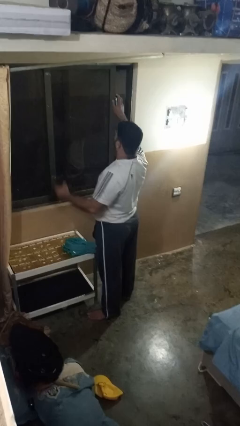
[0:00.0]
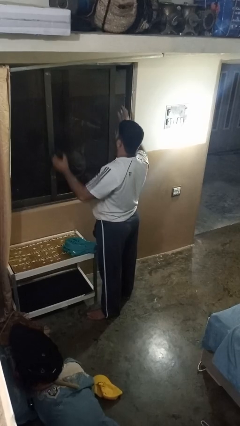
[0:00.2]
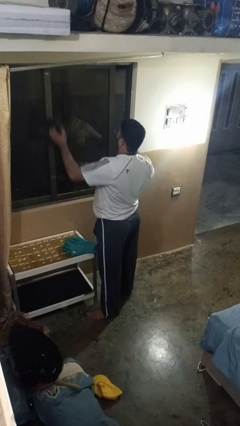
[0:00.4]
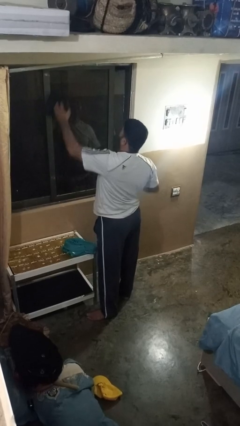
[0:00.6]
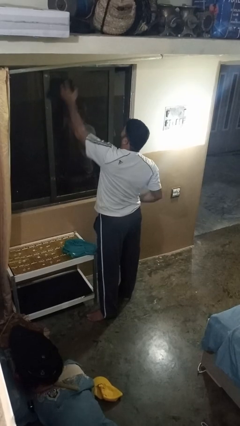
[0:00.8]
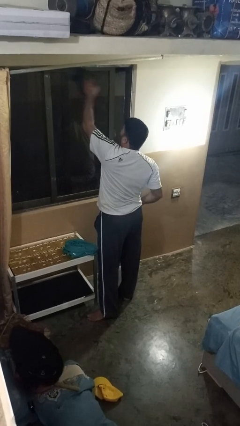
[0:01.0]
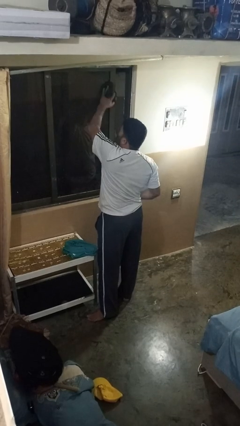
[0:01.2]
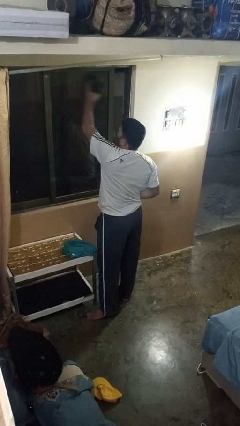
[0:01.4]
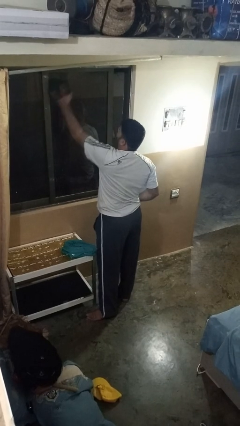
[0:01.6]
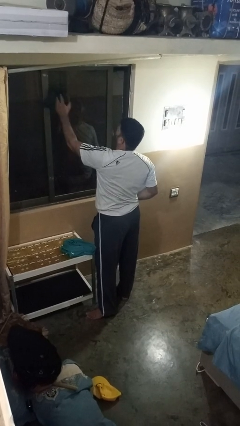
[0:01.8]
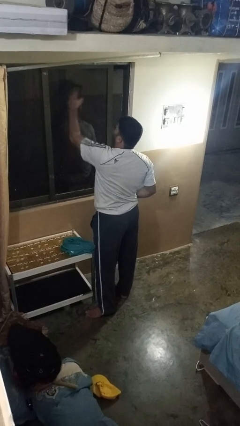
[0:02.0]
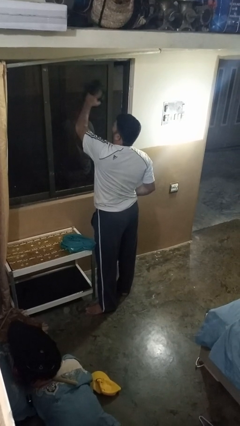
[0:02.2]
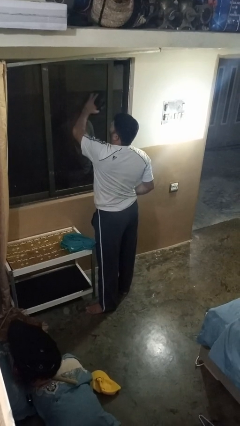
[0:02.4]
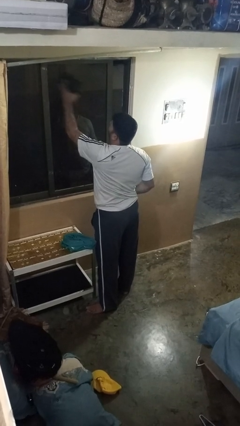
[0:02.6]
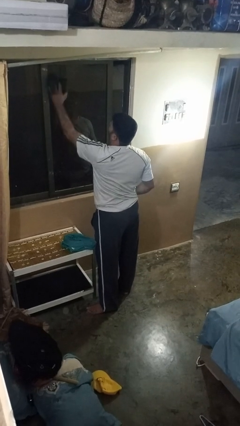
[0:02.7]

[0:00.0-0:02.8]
person washes window

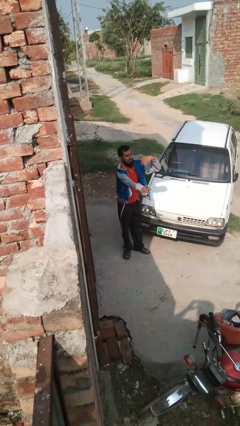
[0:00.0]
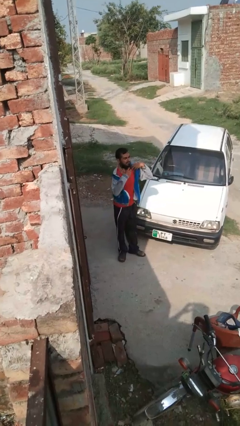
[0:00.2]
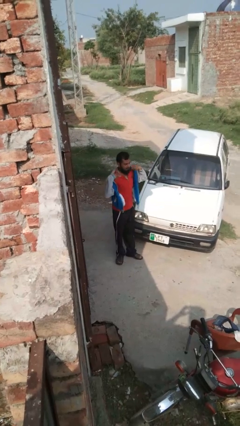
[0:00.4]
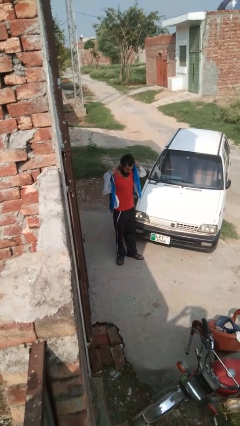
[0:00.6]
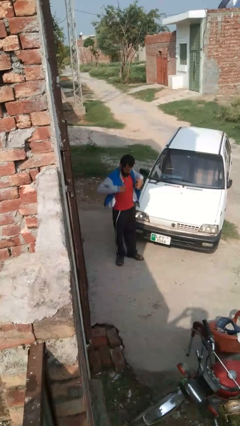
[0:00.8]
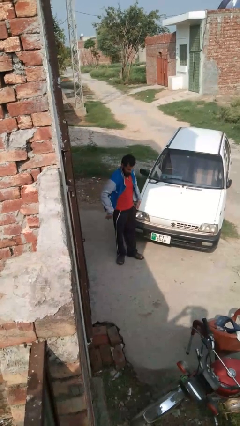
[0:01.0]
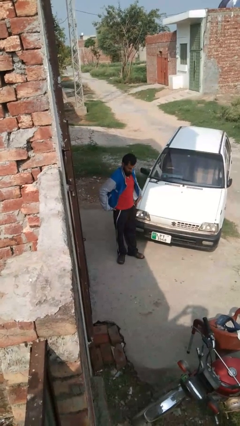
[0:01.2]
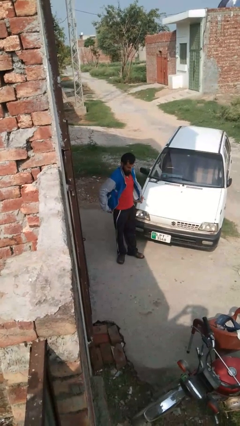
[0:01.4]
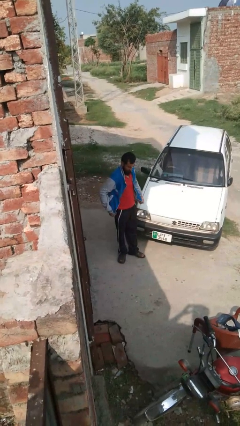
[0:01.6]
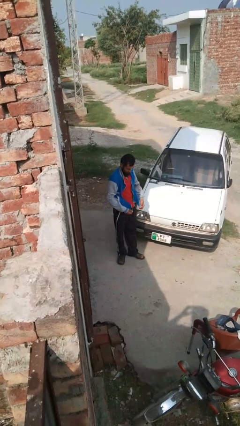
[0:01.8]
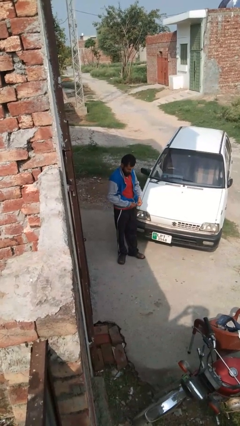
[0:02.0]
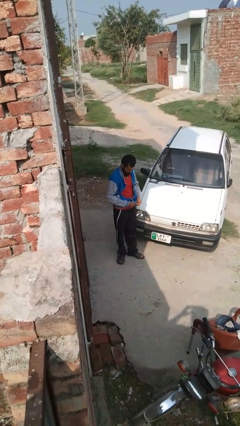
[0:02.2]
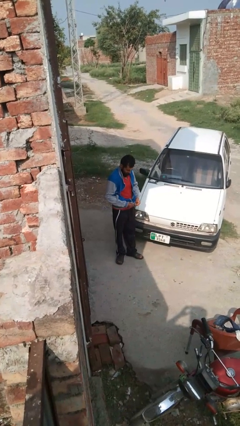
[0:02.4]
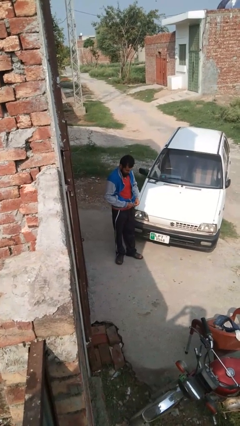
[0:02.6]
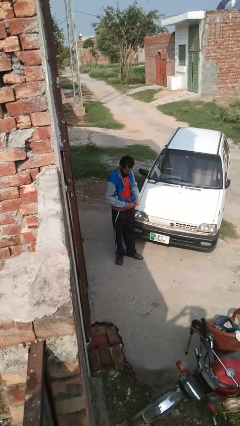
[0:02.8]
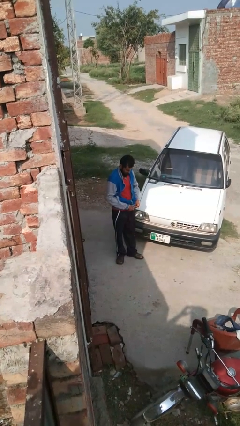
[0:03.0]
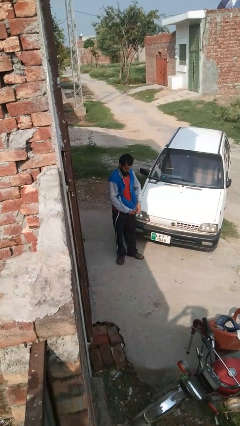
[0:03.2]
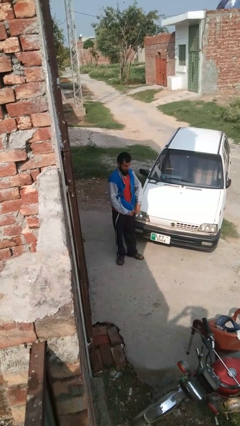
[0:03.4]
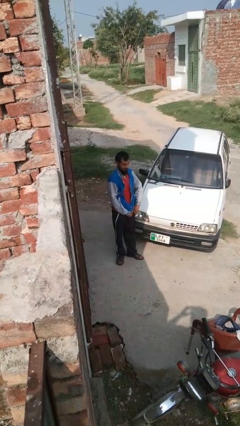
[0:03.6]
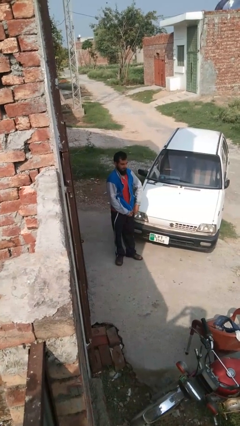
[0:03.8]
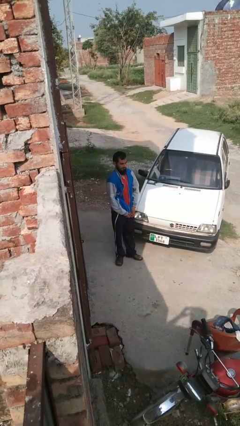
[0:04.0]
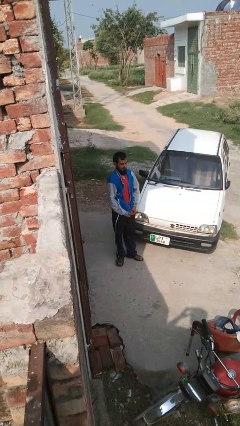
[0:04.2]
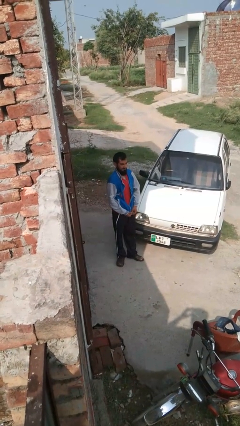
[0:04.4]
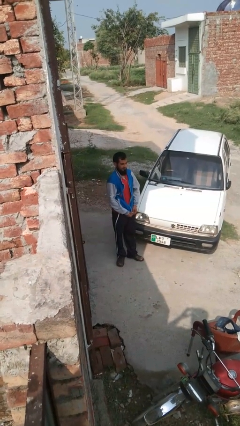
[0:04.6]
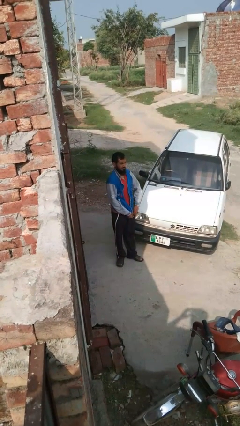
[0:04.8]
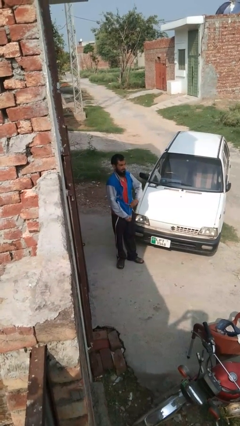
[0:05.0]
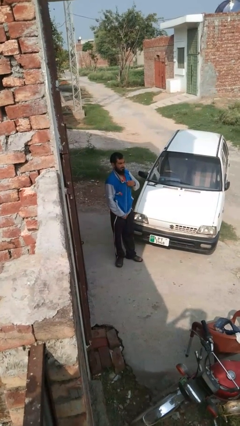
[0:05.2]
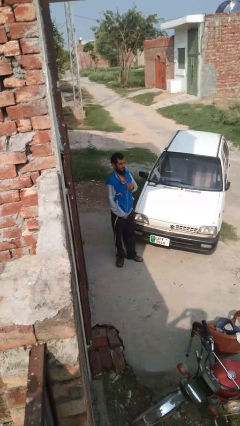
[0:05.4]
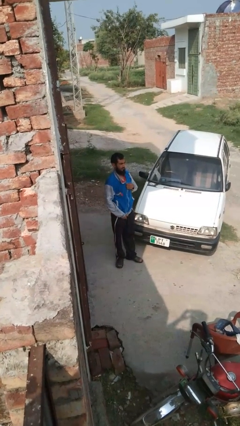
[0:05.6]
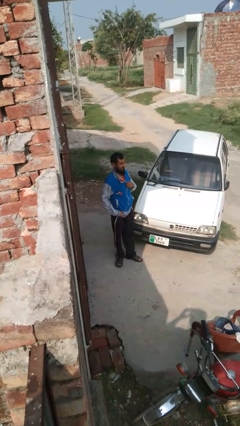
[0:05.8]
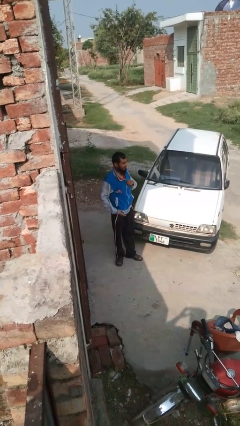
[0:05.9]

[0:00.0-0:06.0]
person zips up jacket

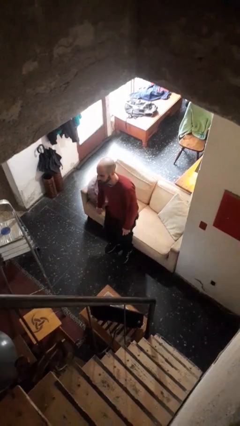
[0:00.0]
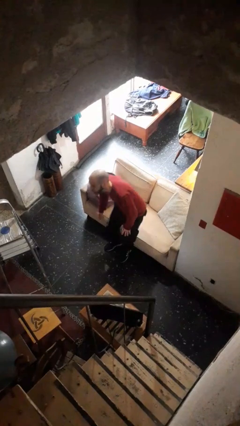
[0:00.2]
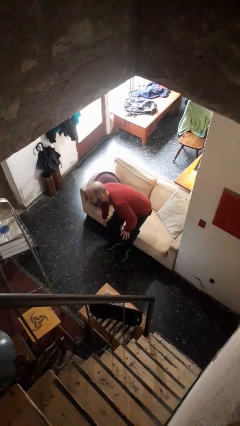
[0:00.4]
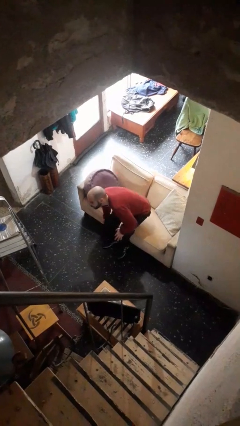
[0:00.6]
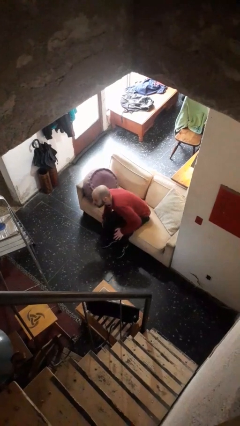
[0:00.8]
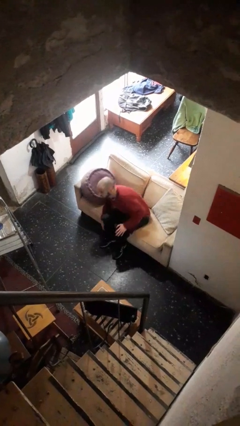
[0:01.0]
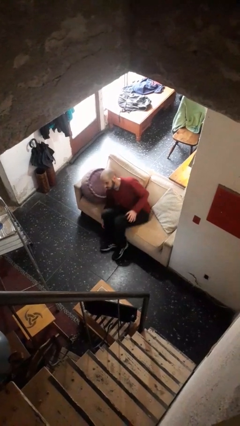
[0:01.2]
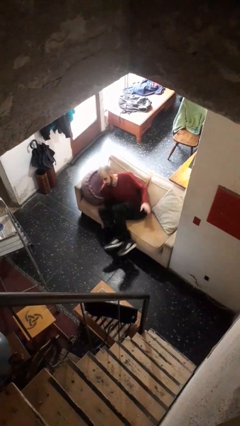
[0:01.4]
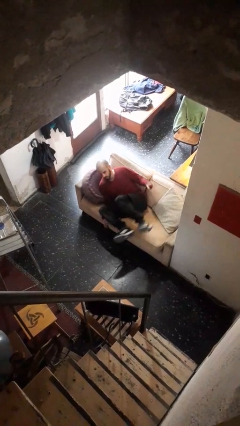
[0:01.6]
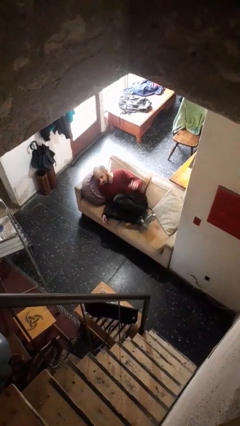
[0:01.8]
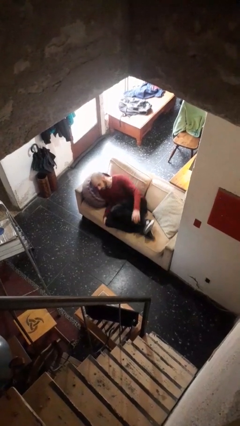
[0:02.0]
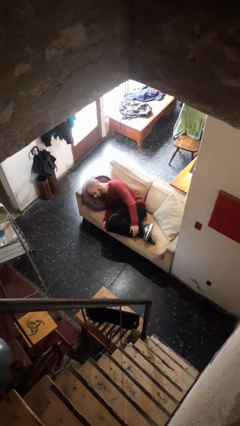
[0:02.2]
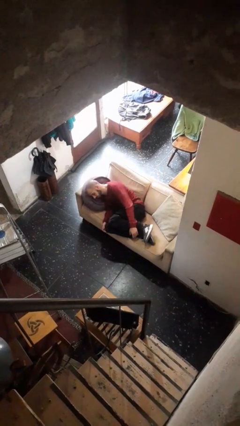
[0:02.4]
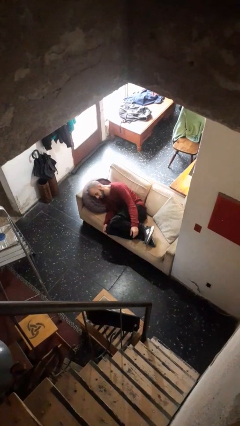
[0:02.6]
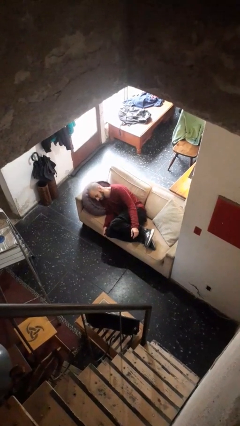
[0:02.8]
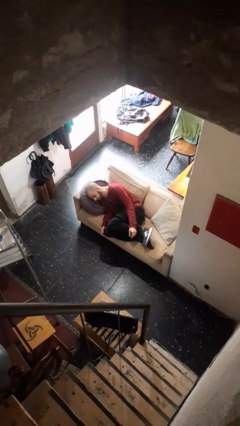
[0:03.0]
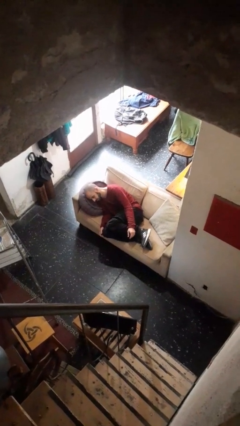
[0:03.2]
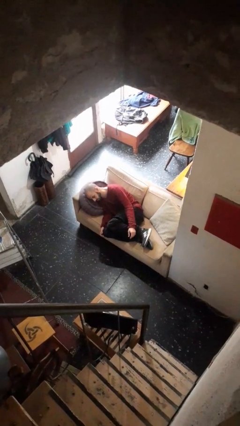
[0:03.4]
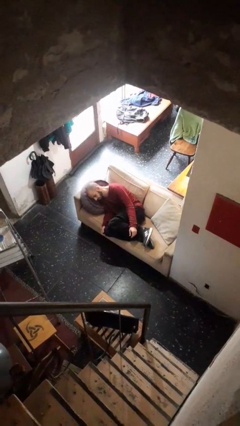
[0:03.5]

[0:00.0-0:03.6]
person lies down on couch

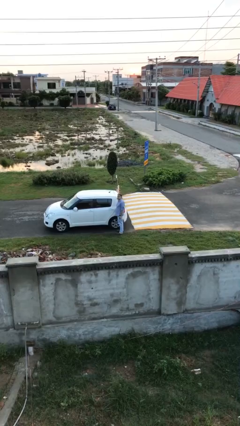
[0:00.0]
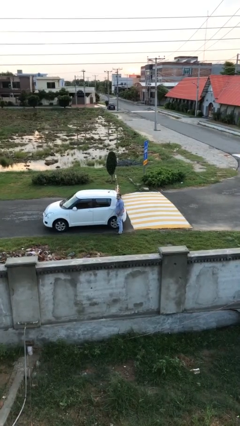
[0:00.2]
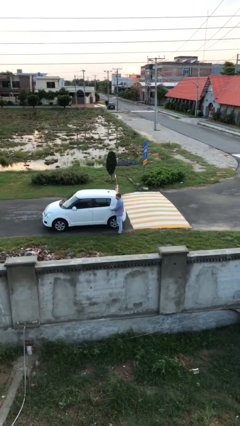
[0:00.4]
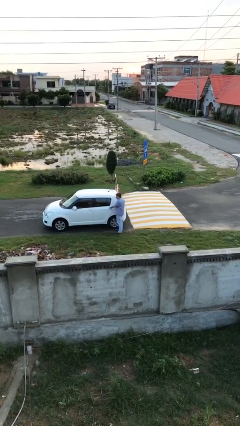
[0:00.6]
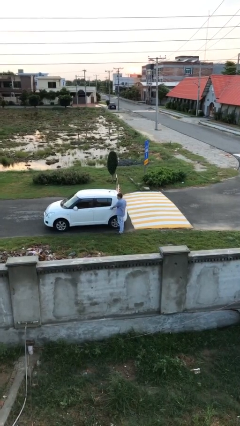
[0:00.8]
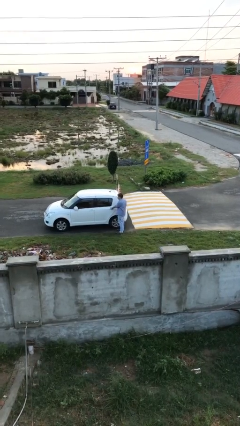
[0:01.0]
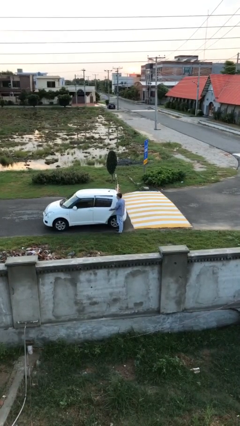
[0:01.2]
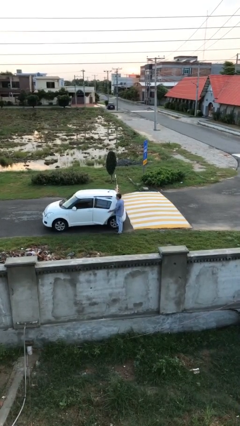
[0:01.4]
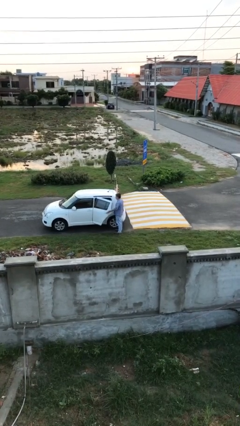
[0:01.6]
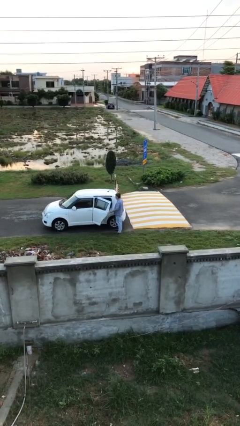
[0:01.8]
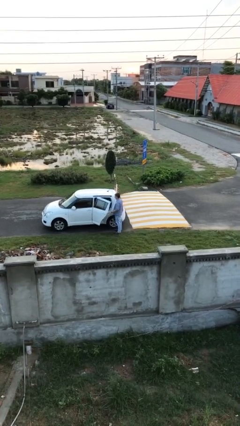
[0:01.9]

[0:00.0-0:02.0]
person opens car door

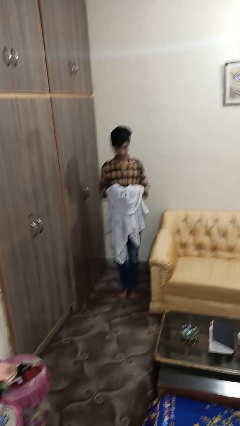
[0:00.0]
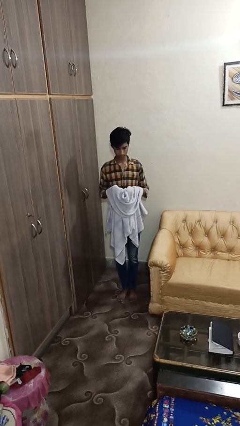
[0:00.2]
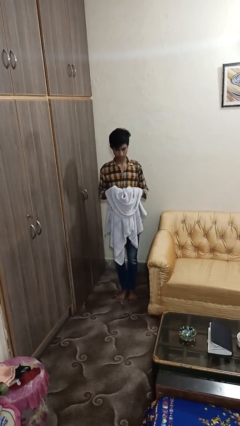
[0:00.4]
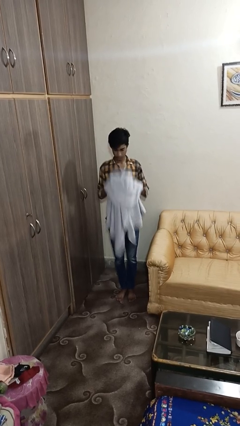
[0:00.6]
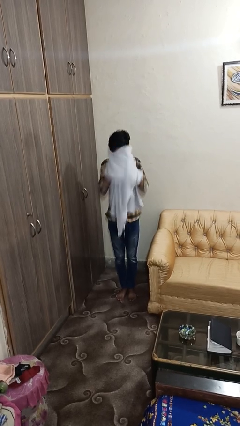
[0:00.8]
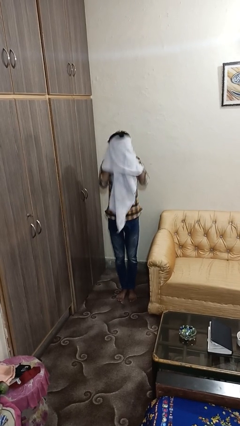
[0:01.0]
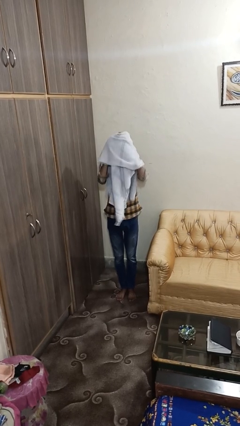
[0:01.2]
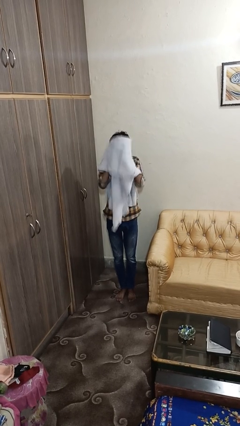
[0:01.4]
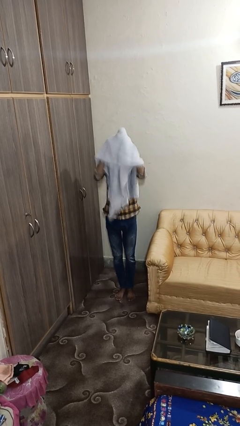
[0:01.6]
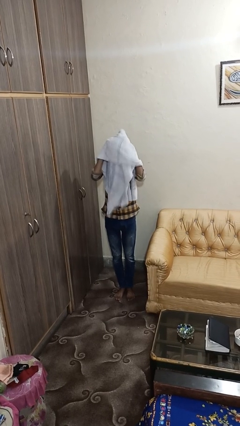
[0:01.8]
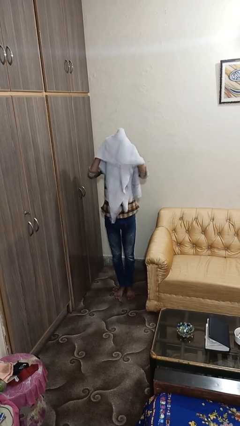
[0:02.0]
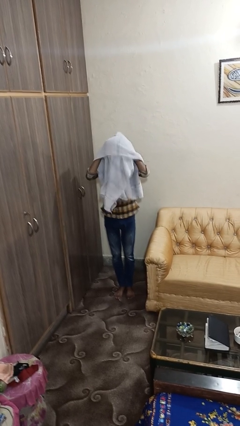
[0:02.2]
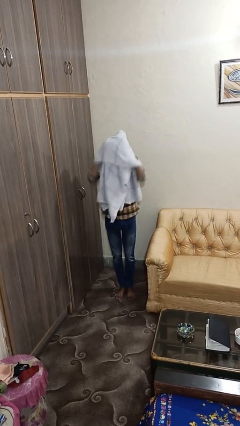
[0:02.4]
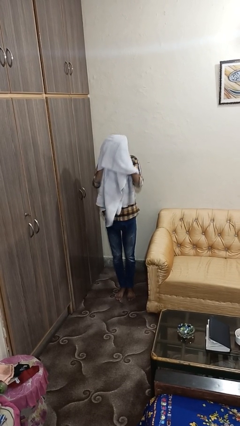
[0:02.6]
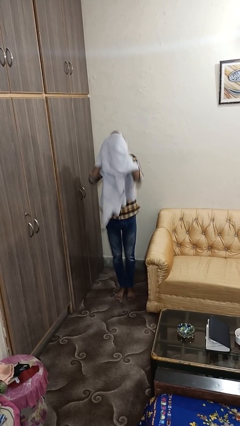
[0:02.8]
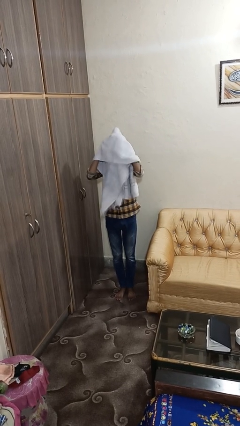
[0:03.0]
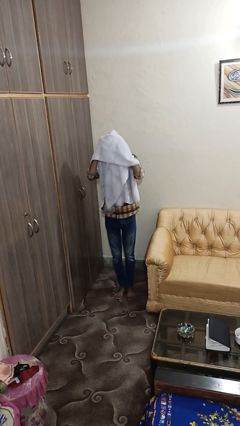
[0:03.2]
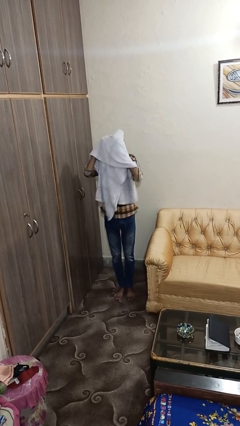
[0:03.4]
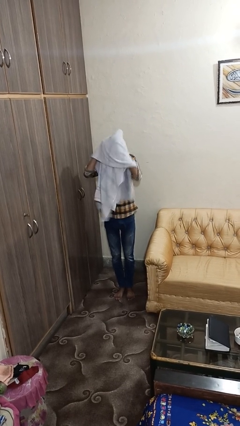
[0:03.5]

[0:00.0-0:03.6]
person dries hair with towel
